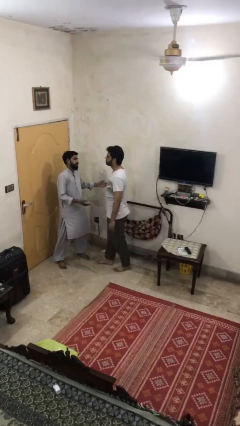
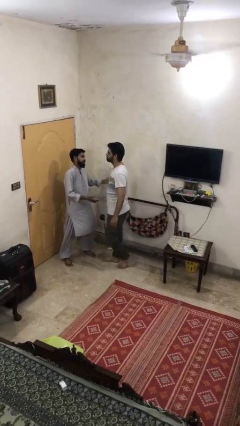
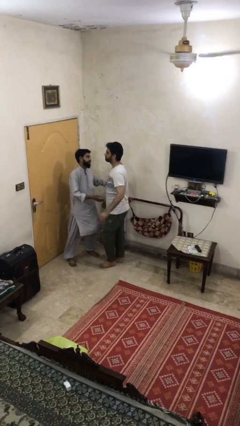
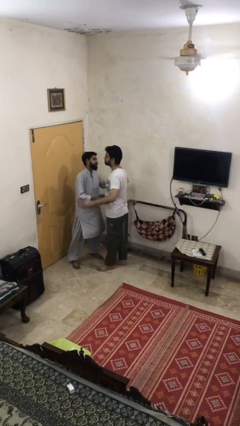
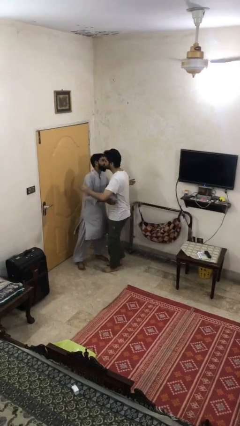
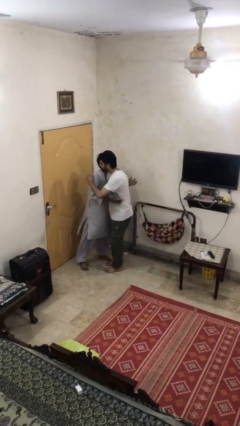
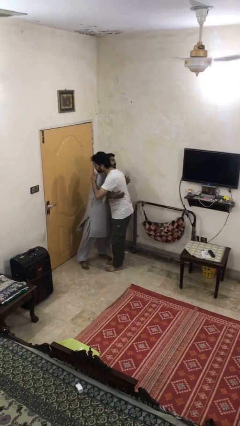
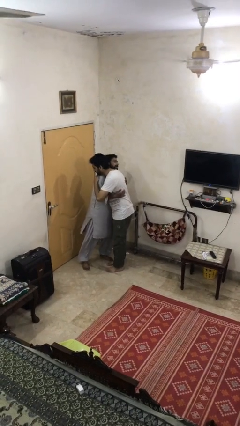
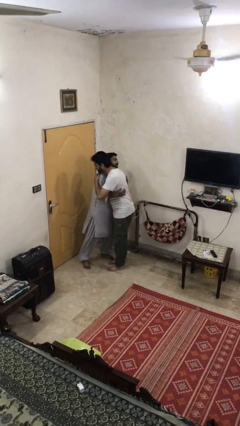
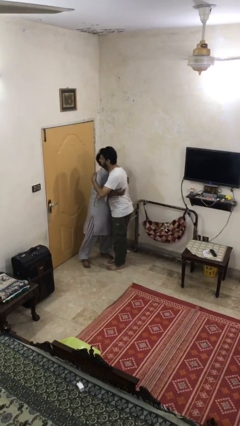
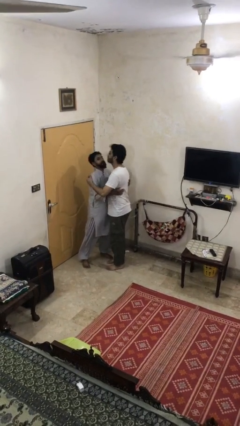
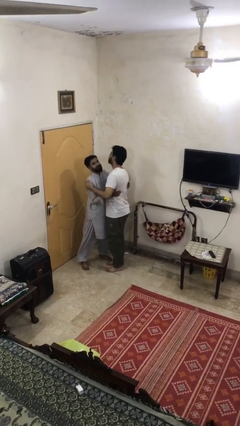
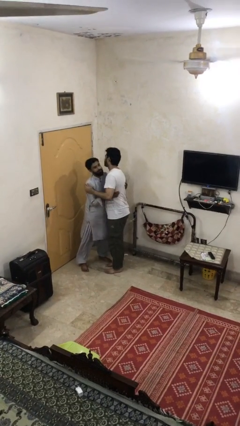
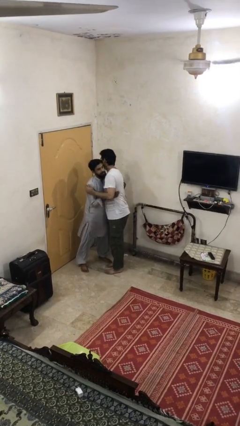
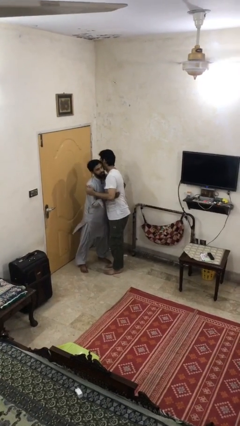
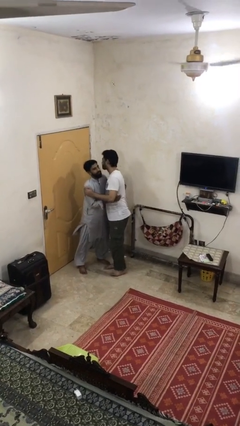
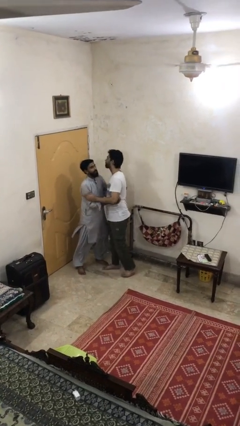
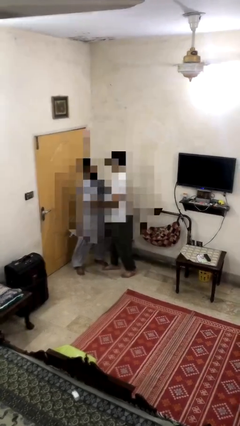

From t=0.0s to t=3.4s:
person embraces person

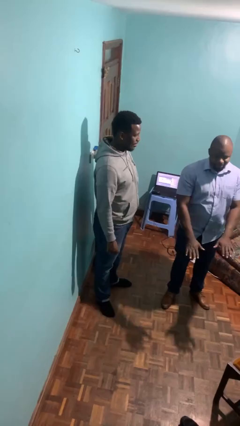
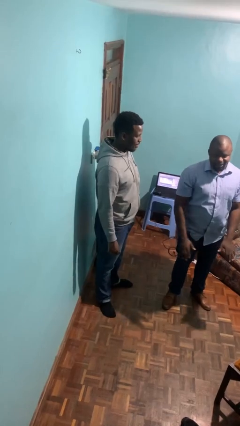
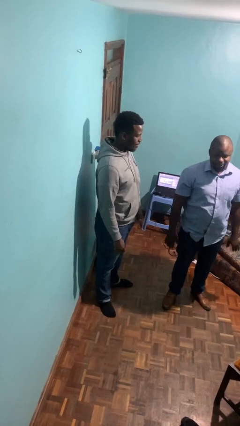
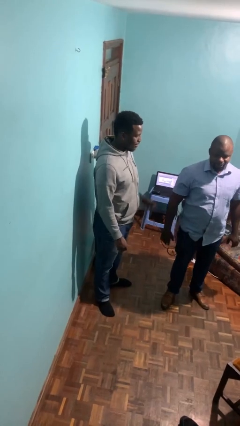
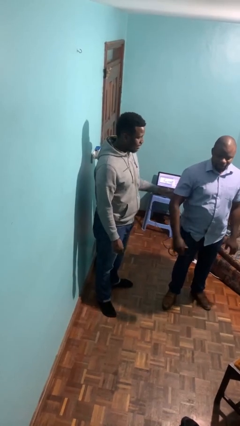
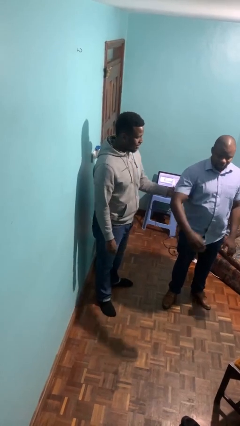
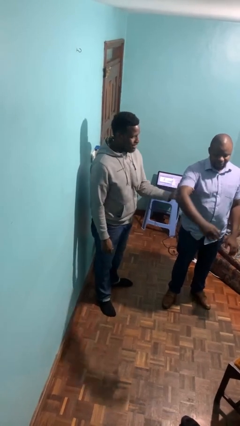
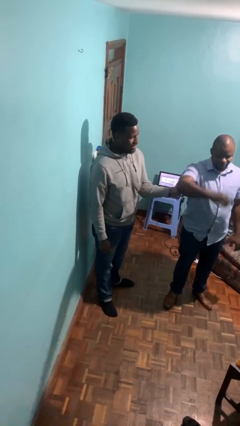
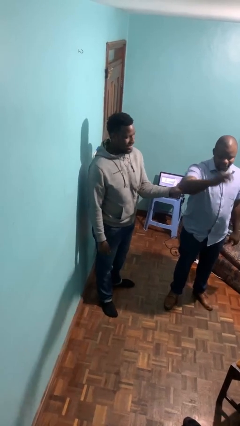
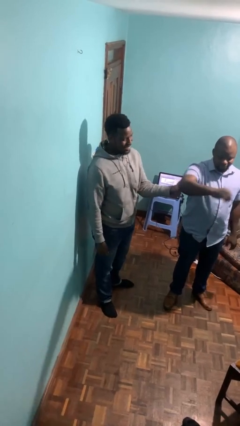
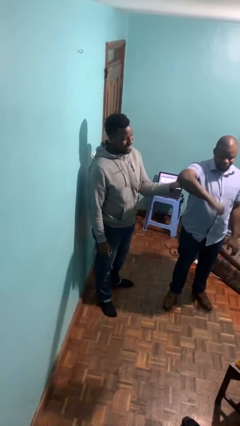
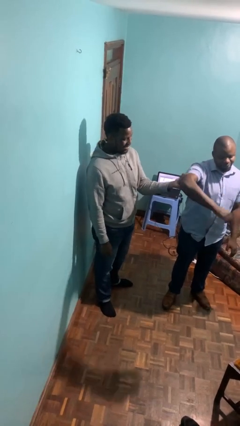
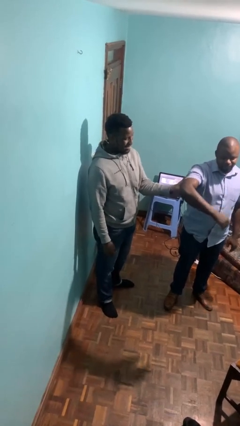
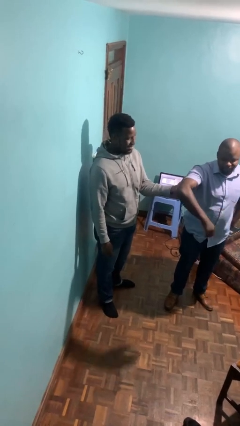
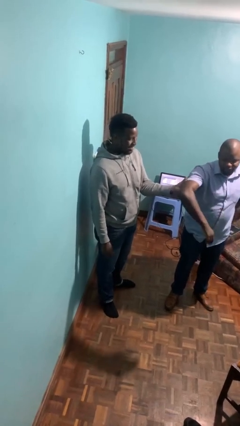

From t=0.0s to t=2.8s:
person grabs person by forearm

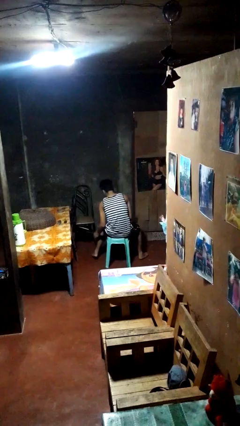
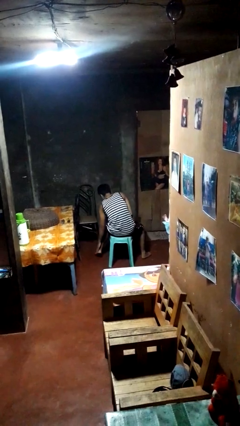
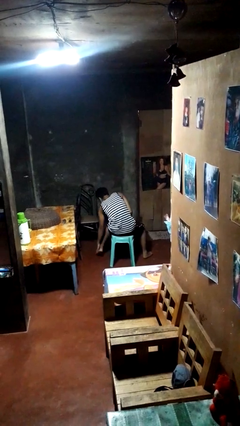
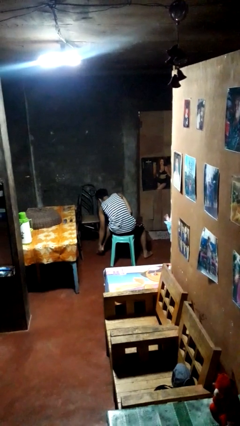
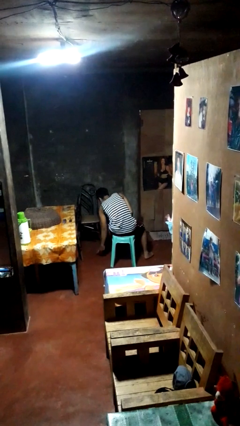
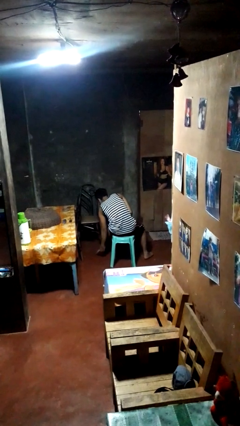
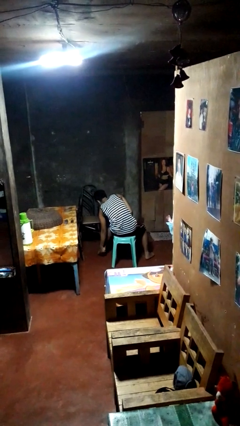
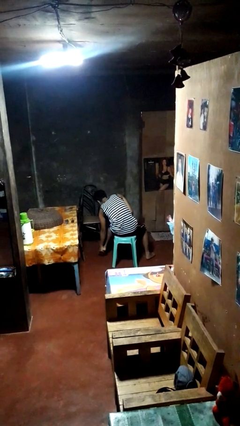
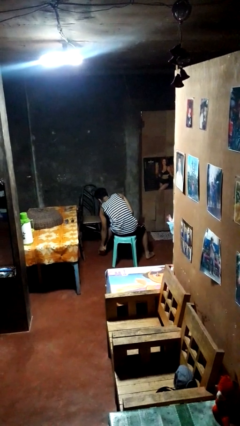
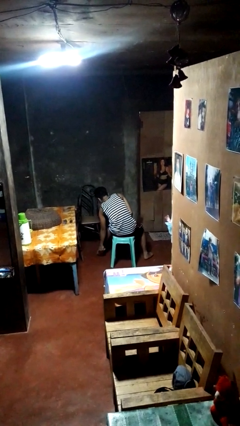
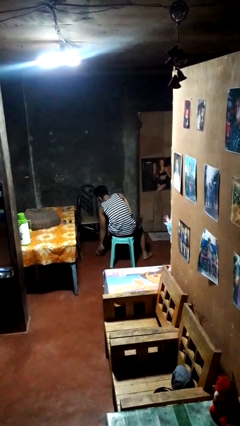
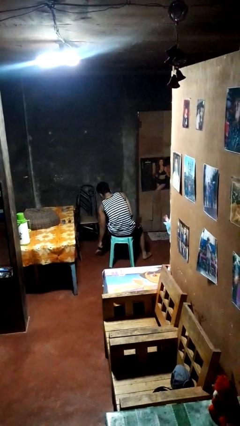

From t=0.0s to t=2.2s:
person rubs foot

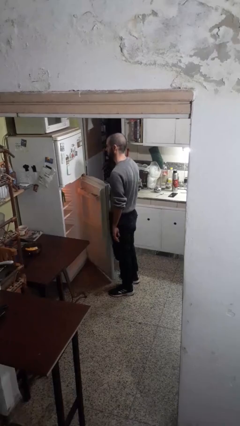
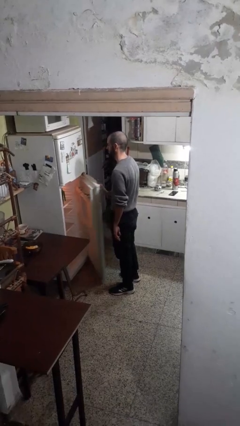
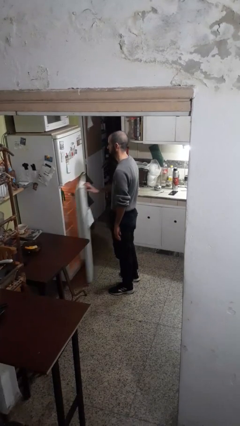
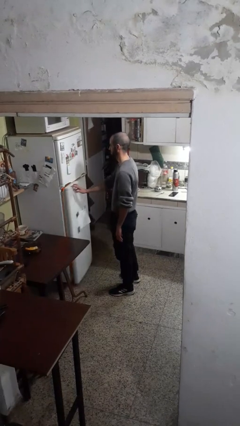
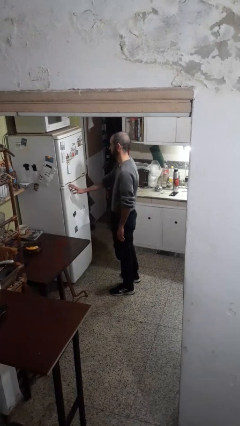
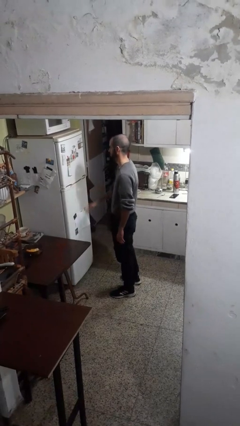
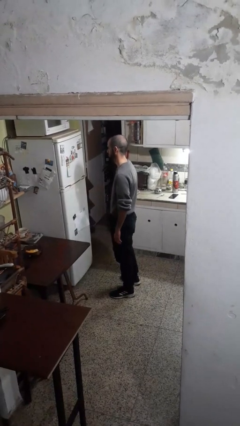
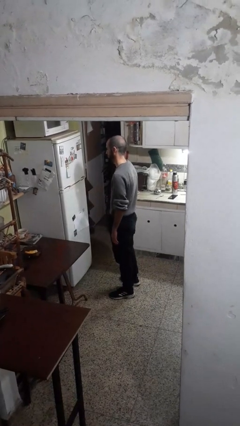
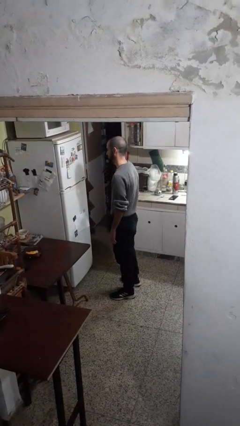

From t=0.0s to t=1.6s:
person closes refrigerator

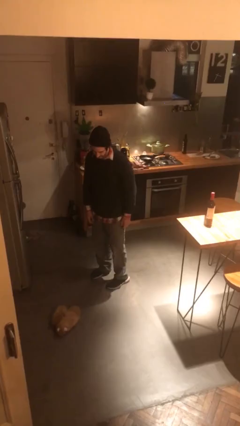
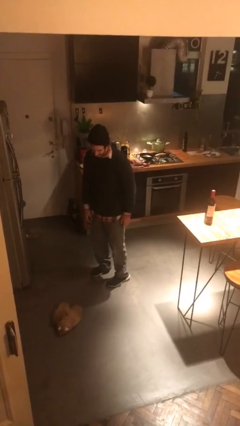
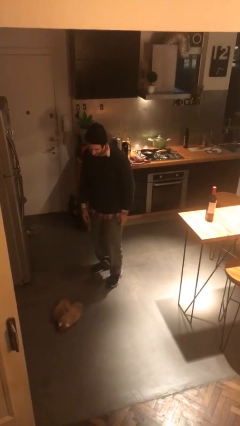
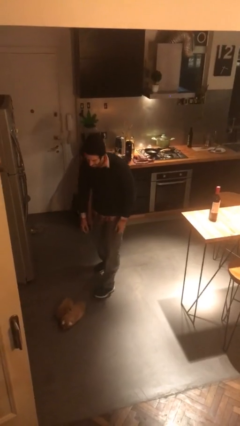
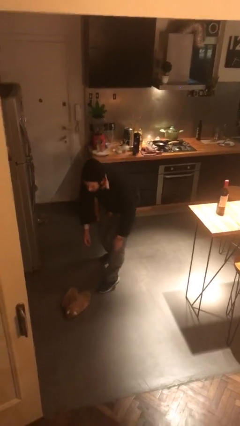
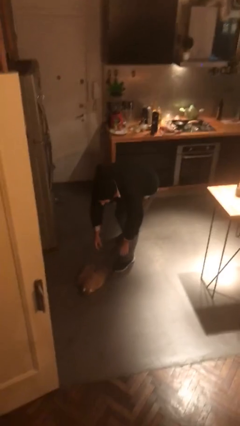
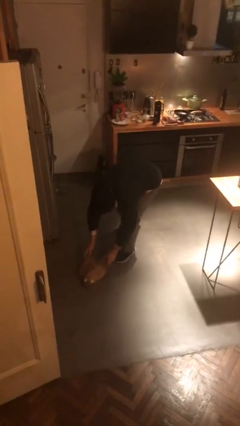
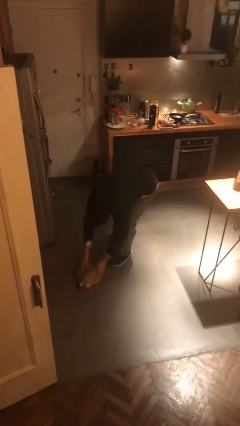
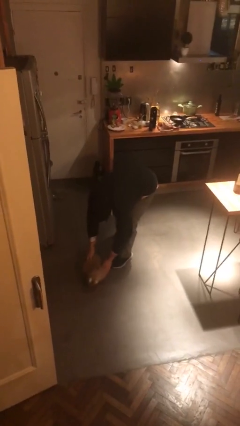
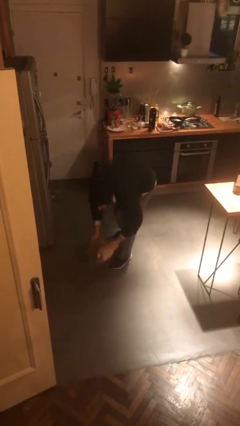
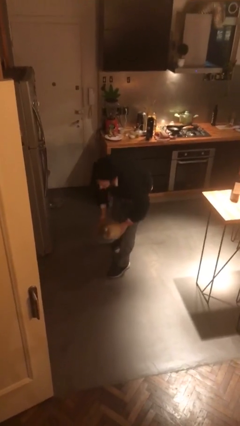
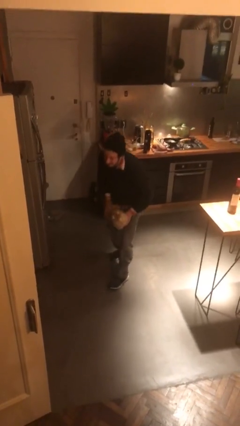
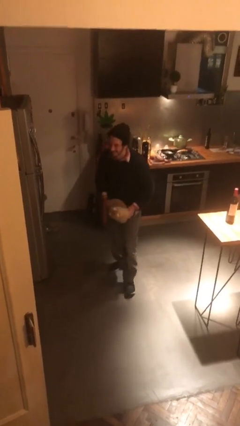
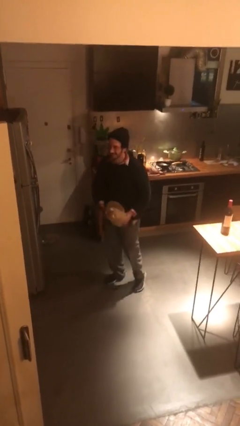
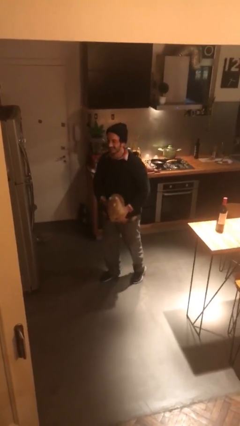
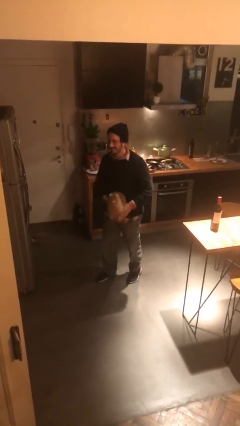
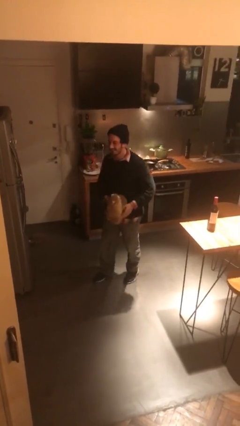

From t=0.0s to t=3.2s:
person picks up object from floor

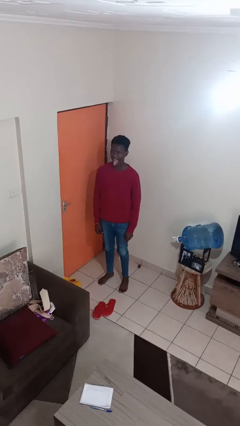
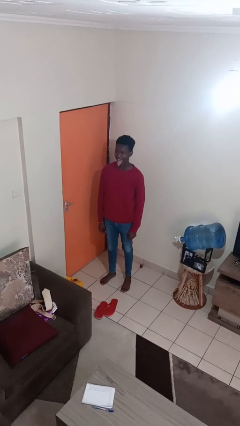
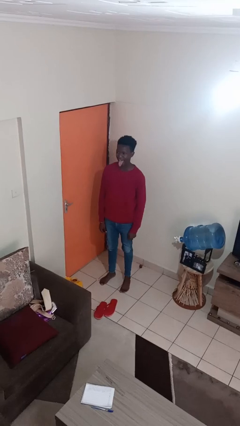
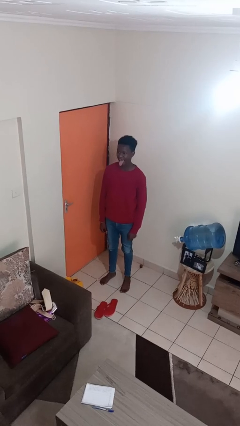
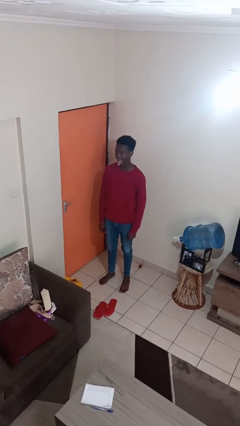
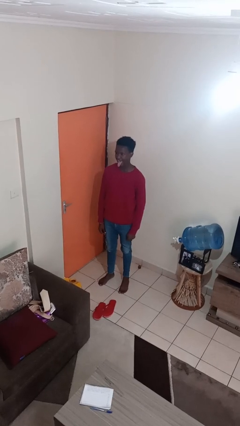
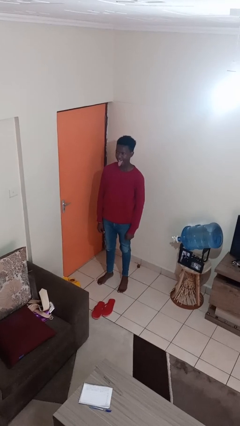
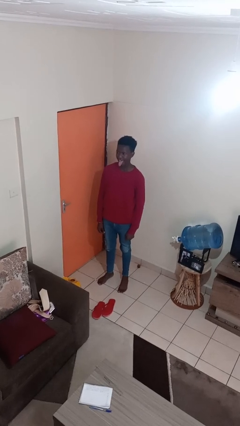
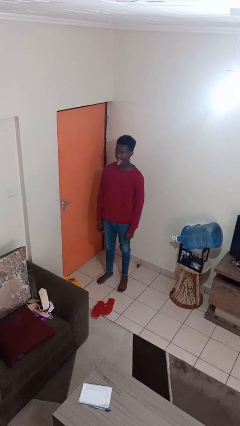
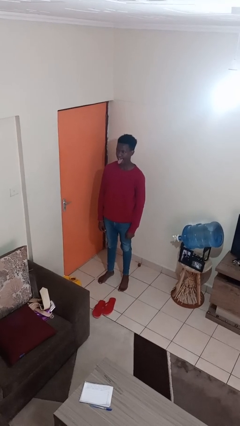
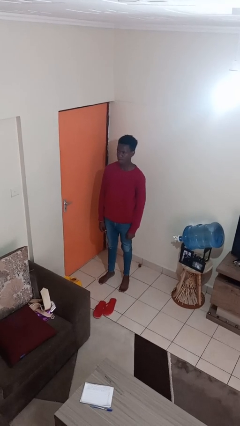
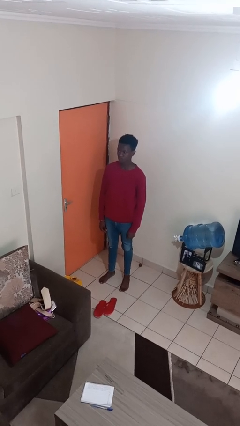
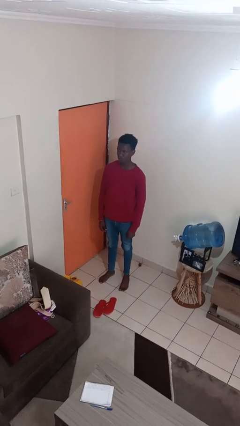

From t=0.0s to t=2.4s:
person sticks out tongue

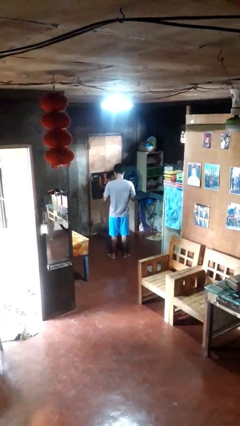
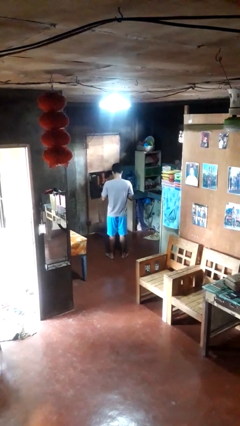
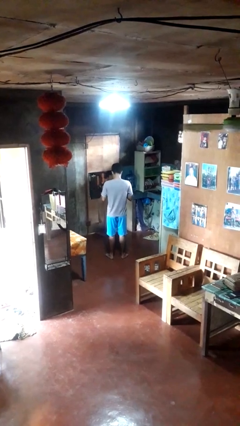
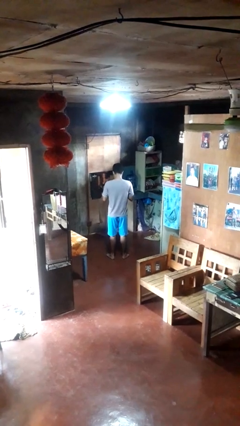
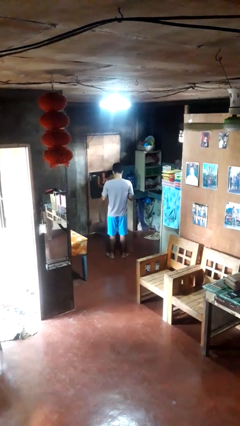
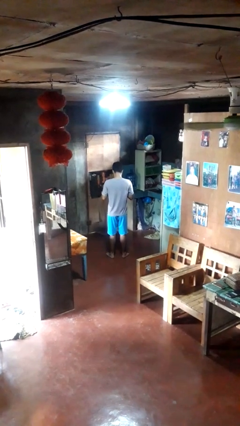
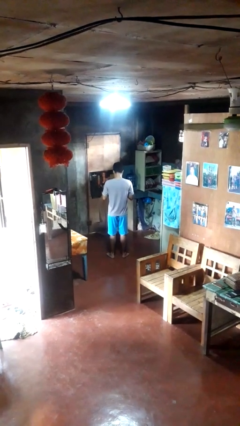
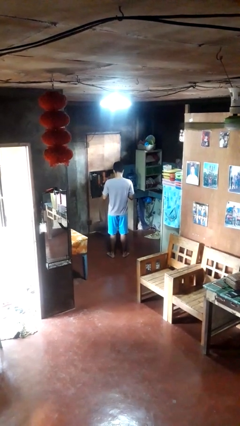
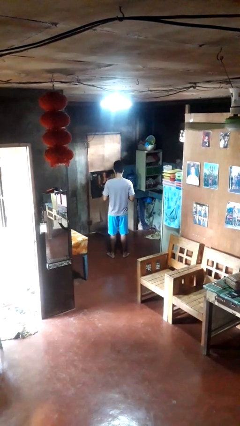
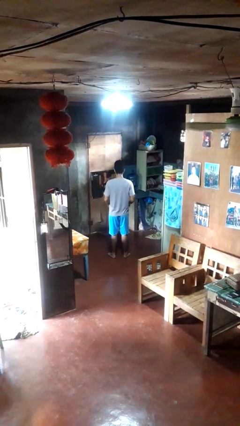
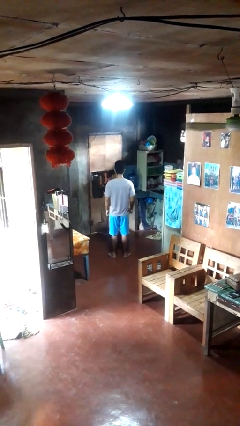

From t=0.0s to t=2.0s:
person buttons shirt
